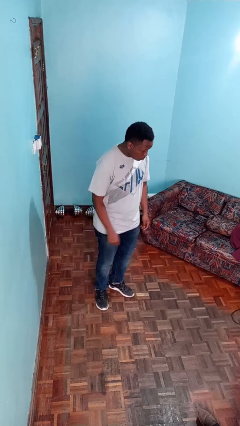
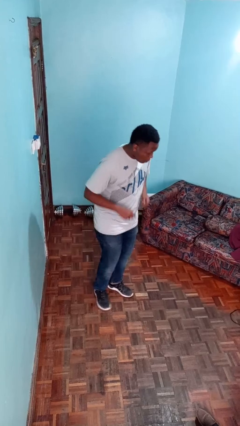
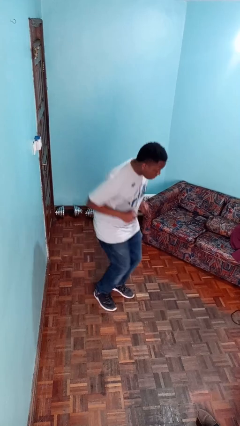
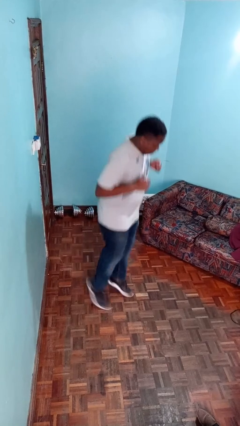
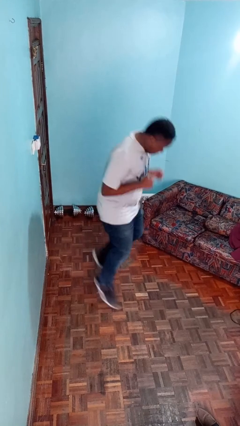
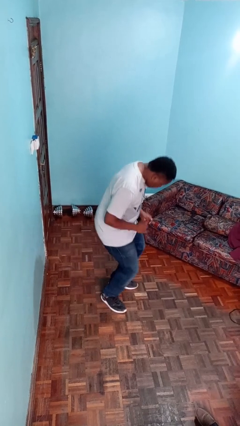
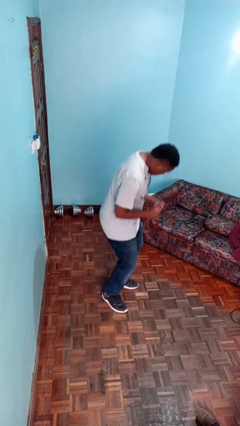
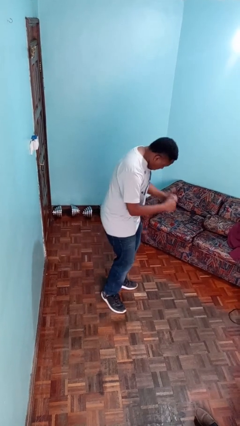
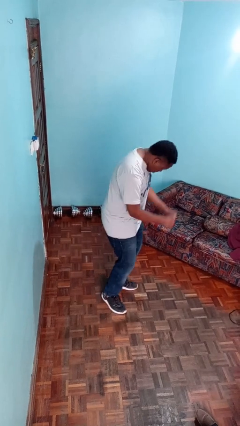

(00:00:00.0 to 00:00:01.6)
person jumps

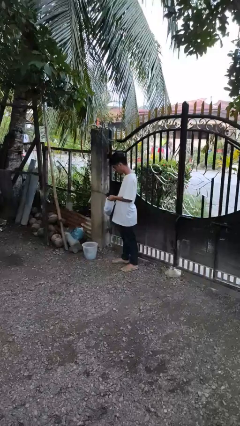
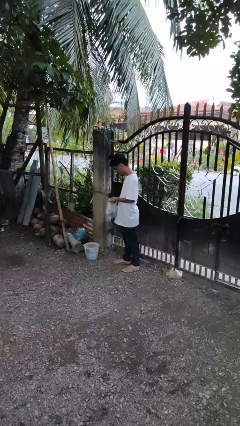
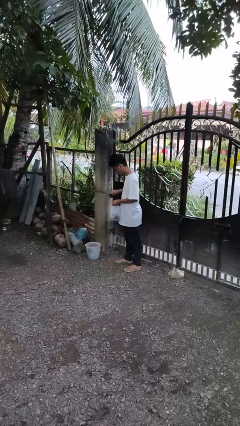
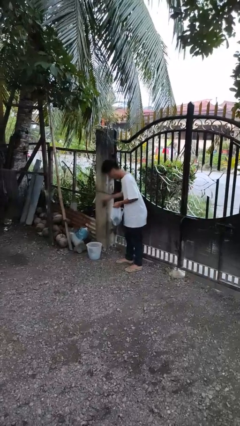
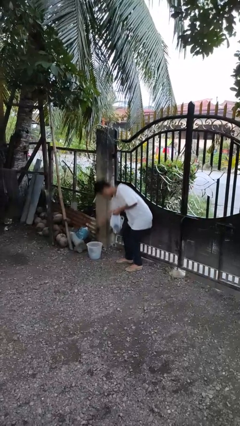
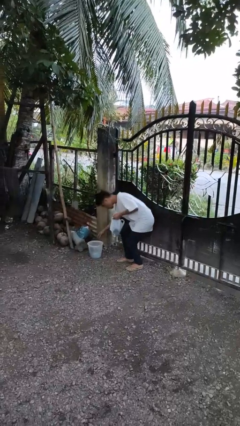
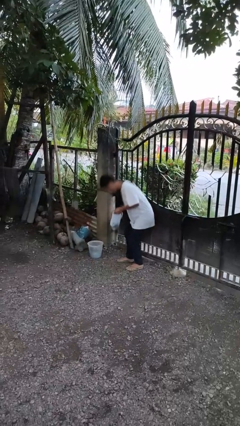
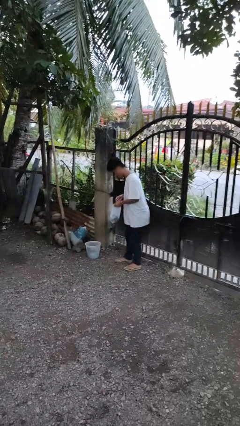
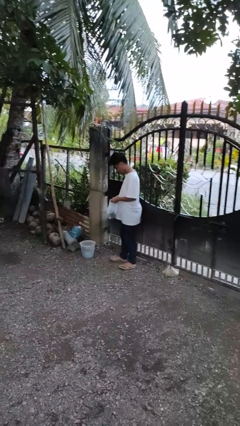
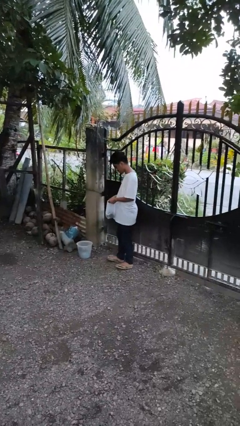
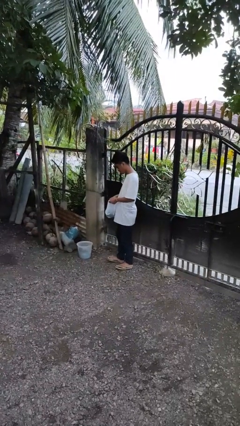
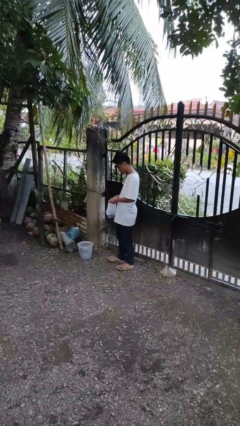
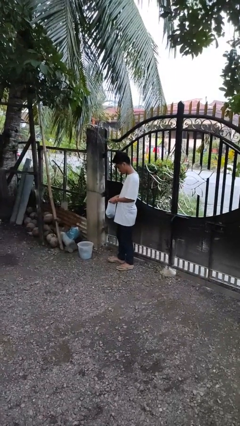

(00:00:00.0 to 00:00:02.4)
person discards trash

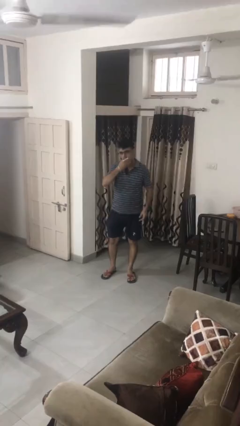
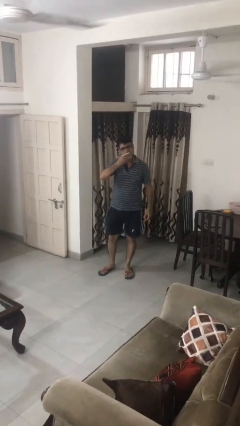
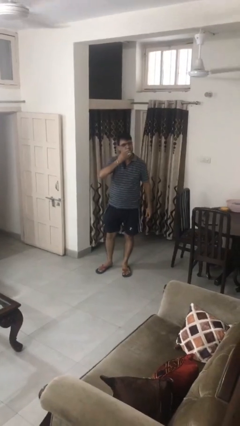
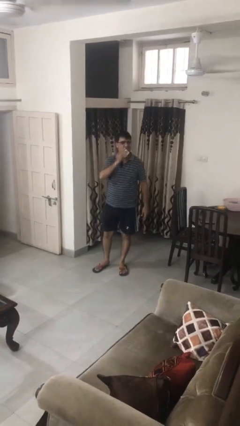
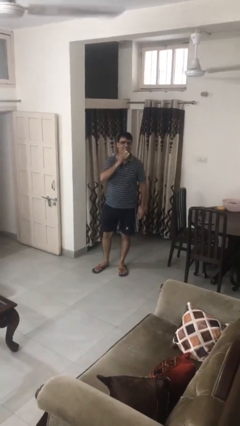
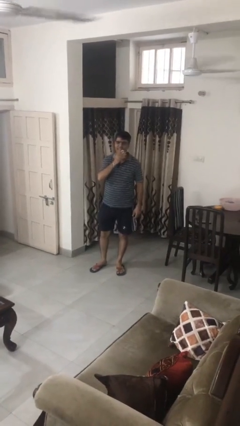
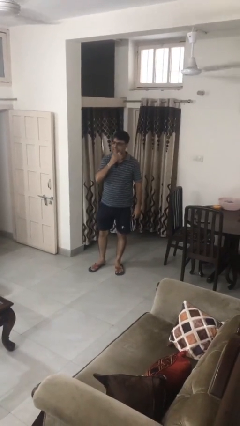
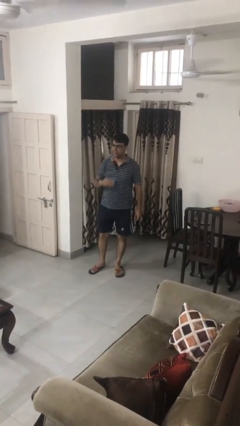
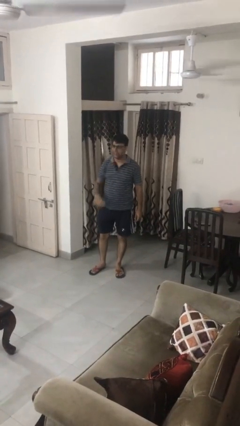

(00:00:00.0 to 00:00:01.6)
person wipes mouth with napkin

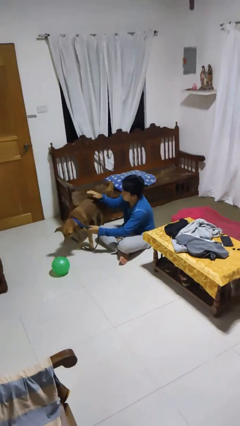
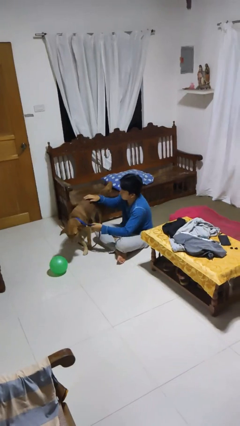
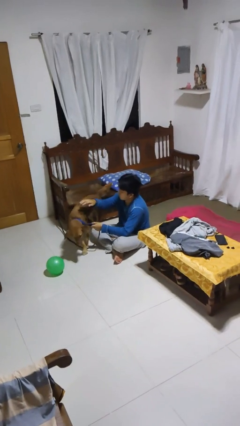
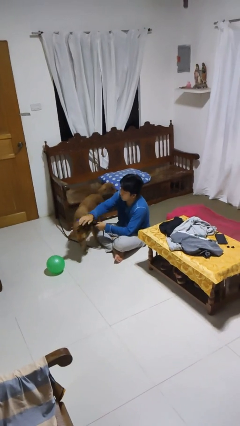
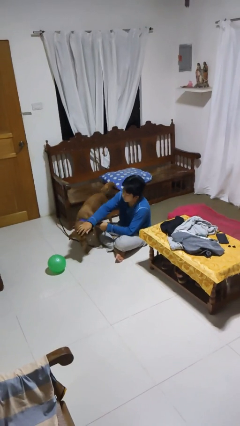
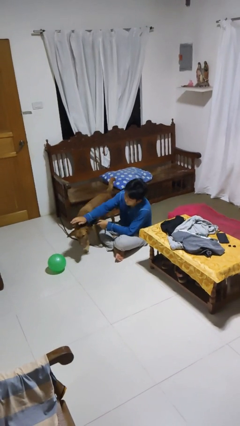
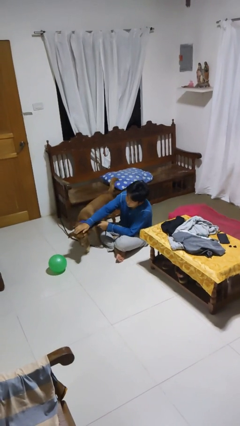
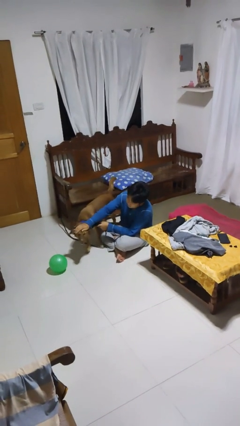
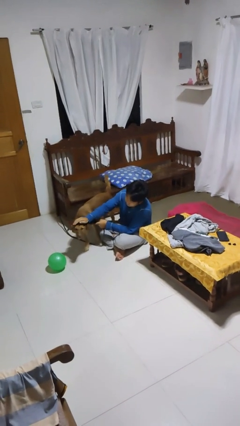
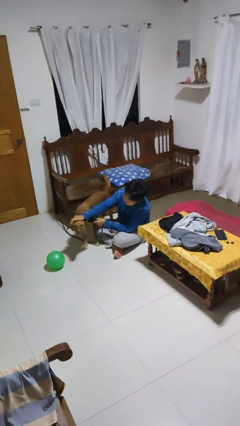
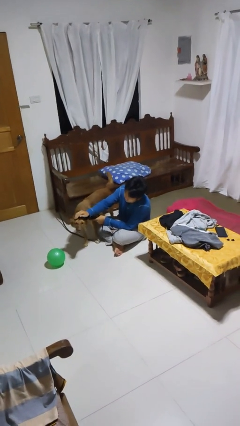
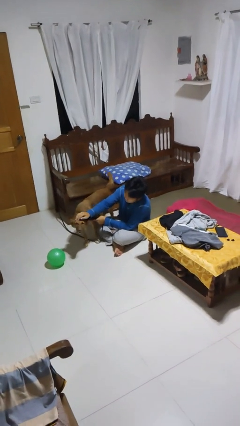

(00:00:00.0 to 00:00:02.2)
person pets dog

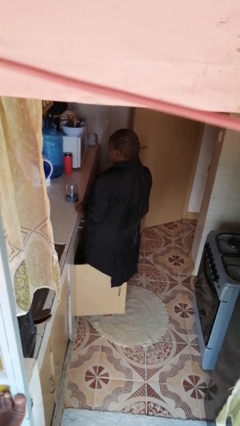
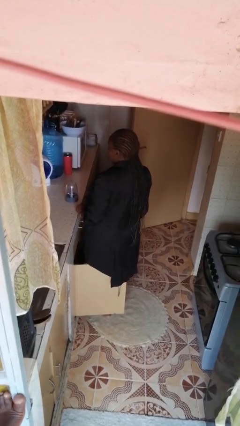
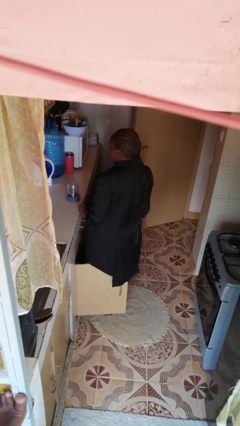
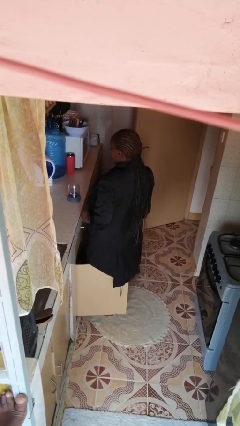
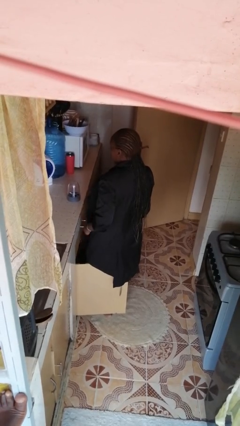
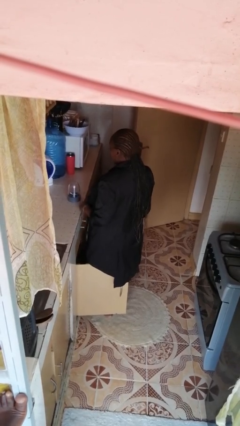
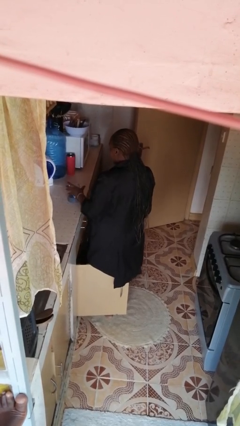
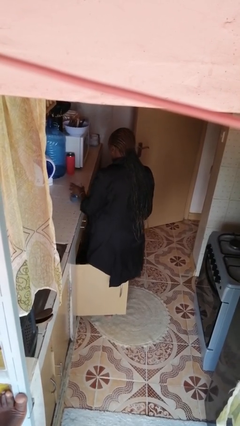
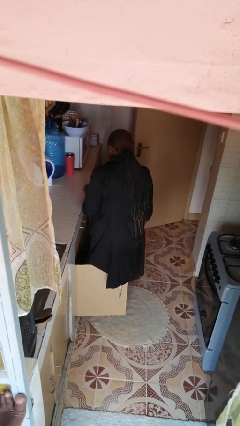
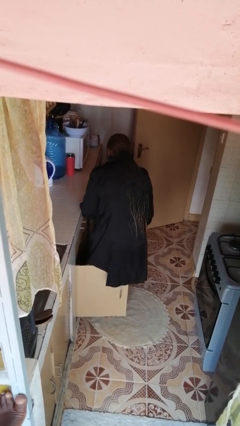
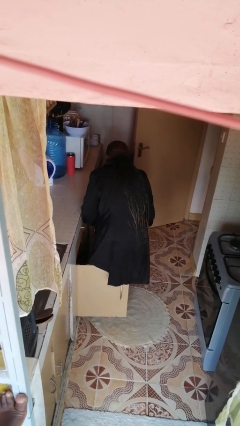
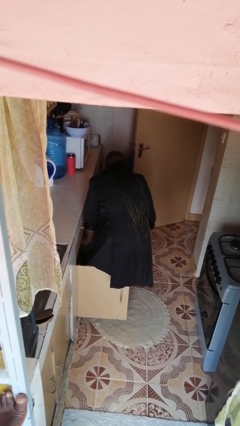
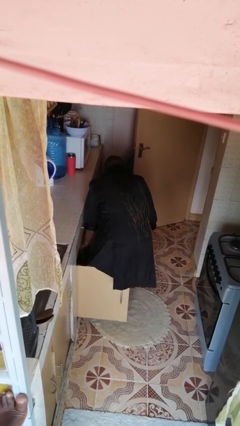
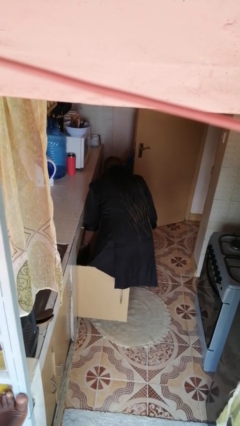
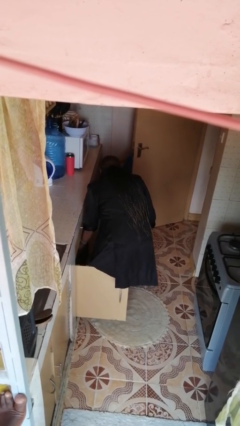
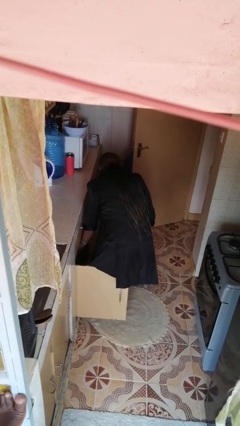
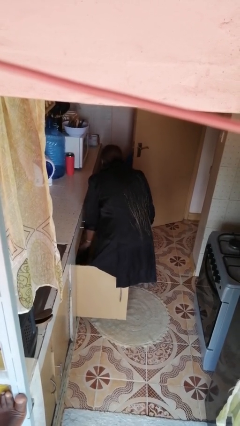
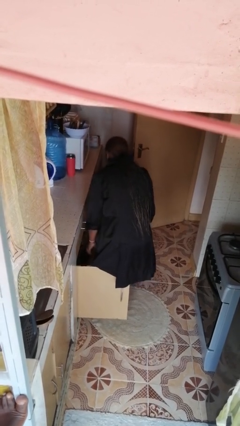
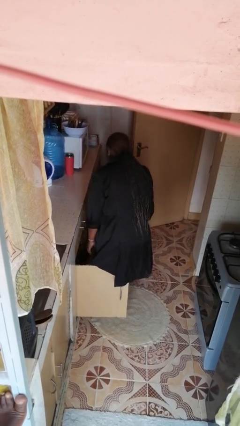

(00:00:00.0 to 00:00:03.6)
person puts object in cabinet

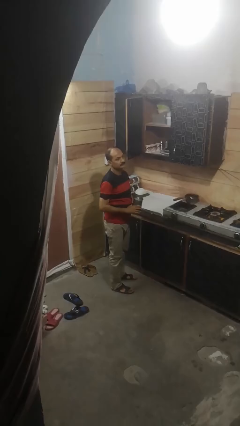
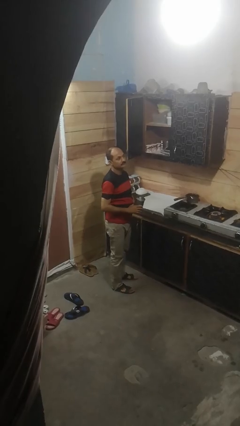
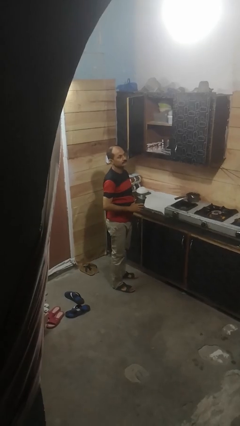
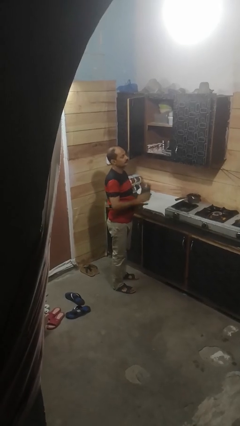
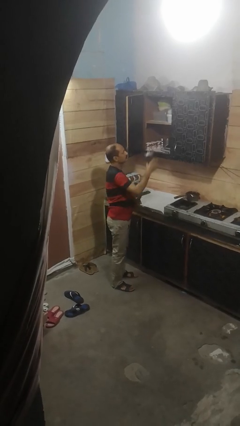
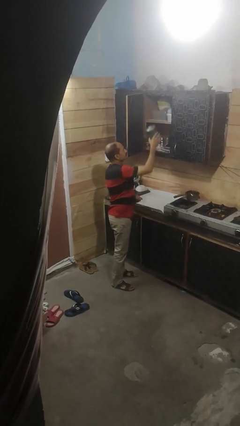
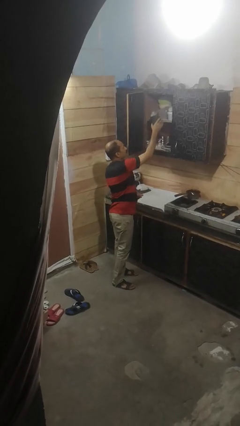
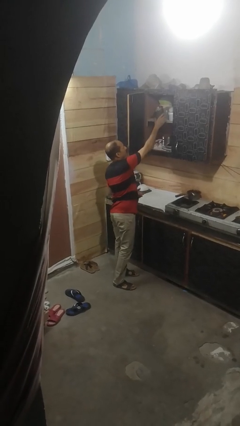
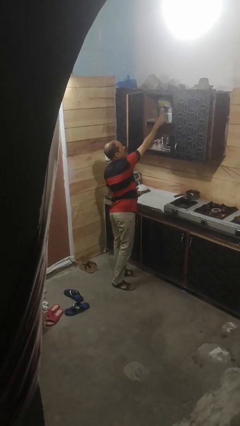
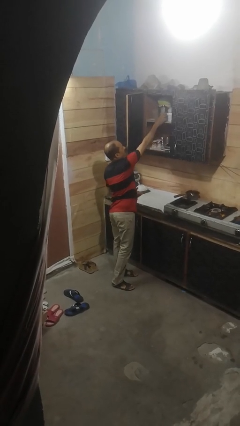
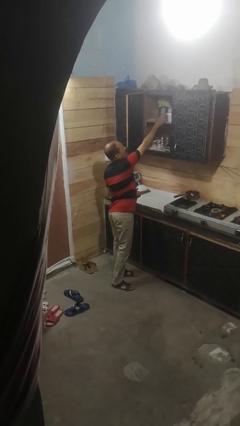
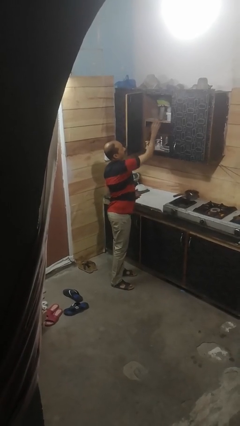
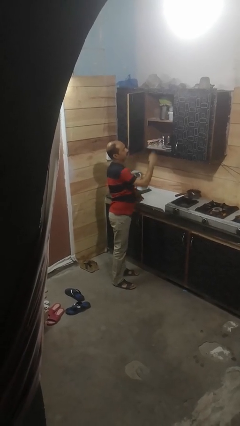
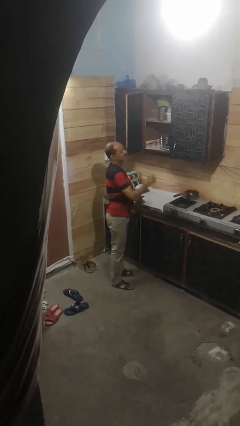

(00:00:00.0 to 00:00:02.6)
person puts down object into cabinet

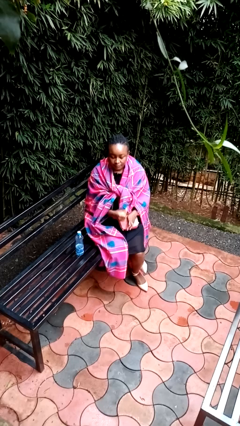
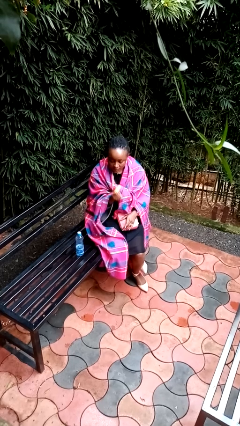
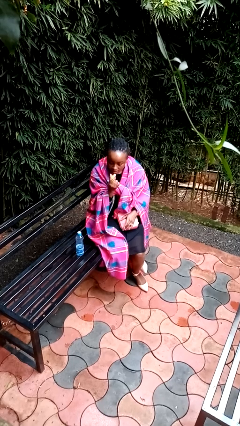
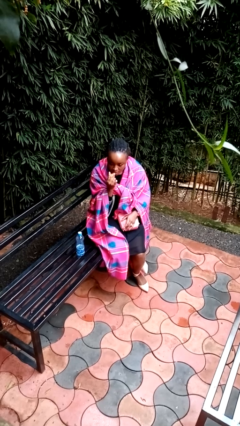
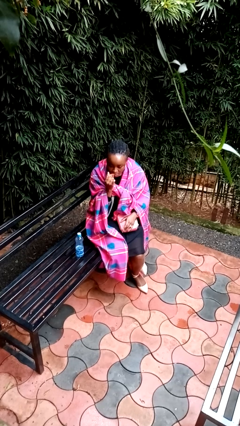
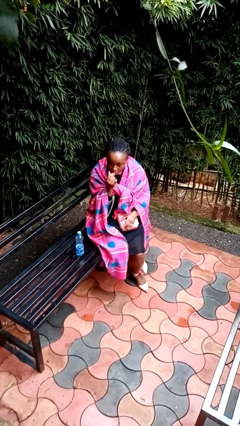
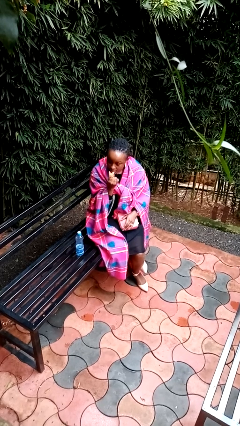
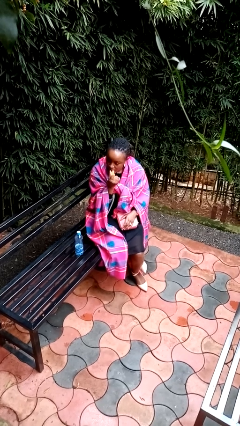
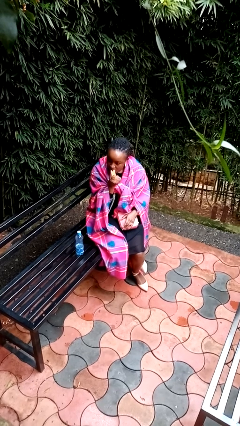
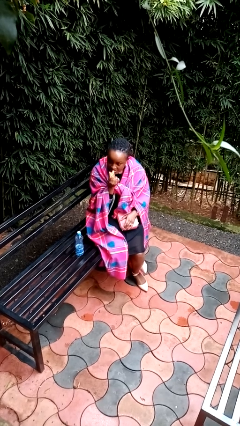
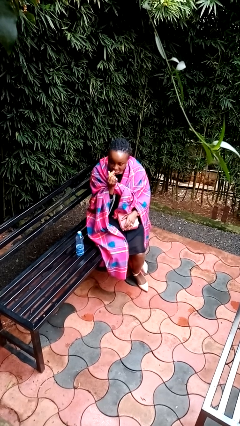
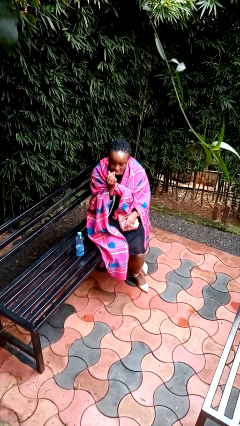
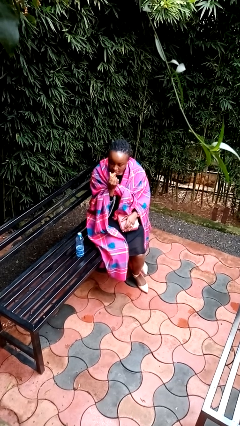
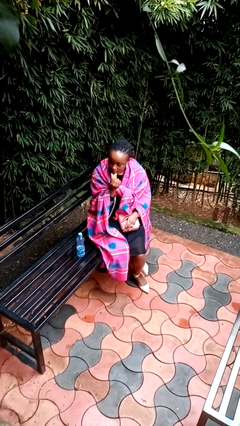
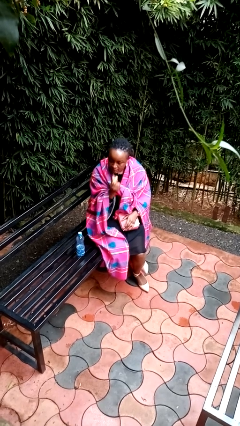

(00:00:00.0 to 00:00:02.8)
person applies lip makeup

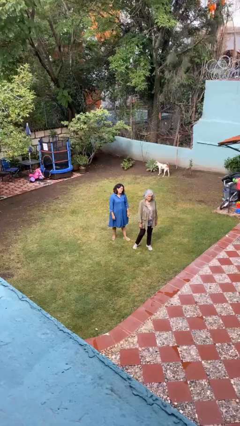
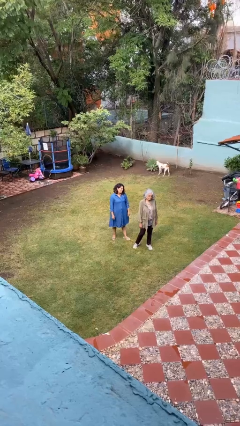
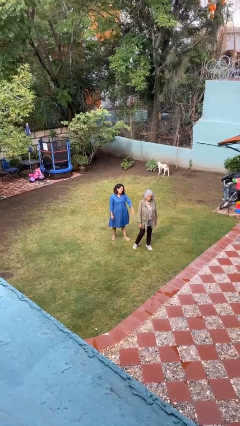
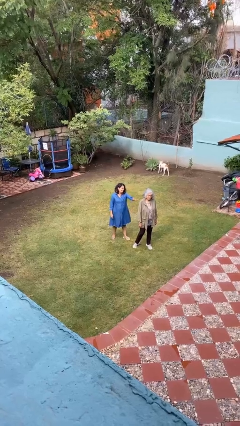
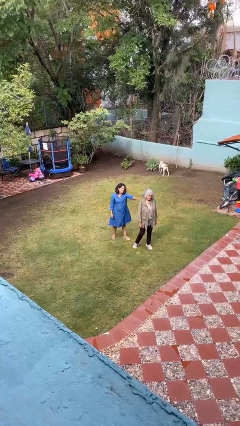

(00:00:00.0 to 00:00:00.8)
person grabs person by shoulder
